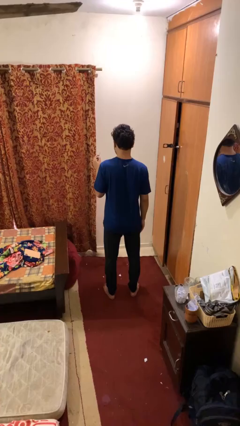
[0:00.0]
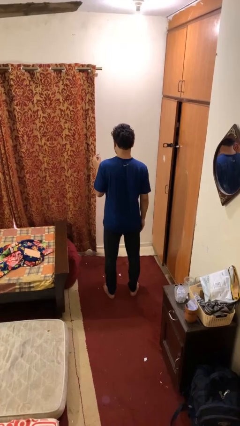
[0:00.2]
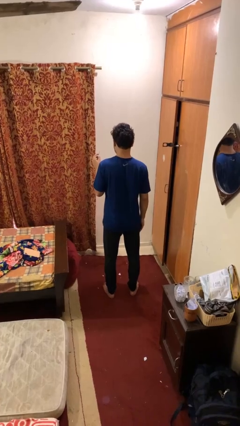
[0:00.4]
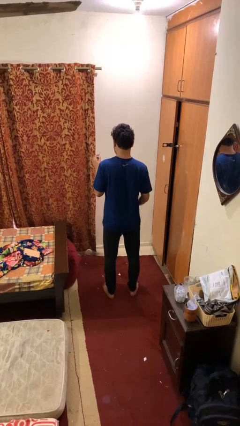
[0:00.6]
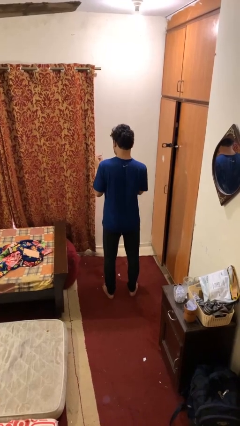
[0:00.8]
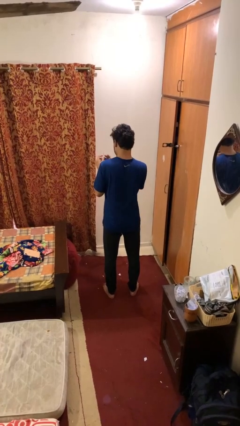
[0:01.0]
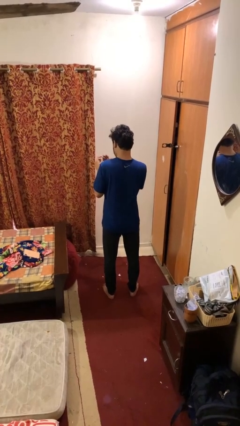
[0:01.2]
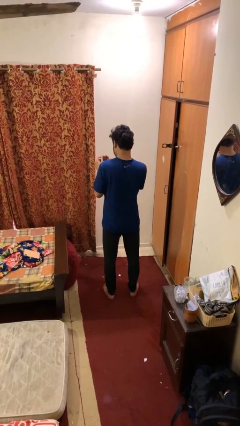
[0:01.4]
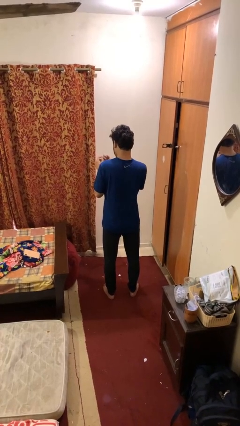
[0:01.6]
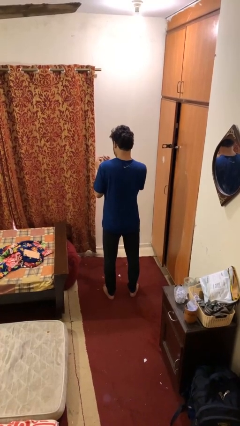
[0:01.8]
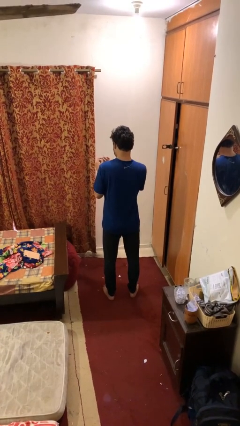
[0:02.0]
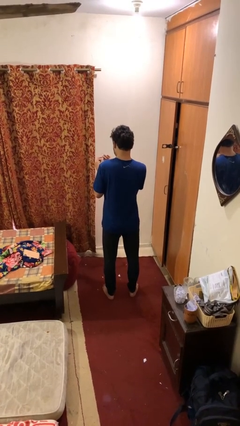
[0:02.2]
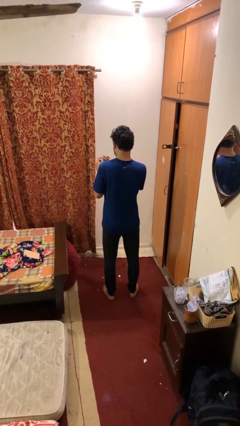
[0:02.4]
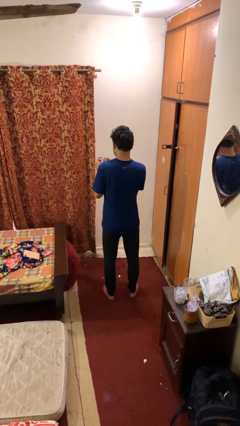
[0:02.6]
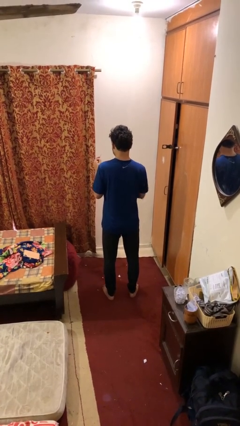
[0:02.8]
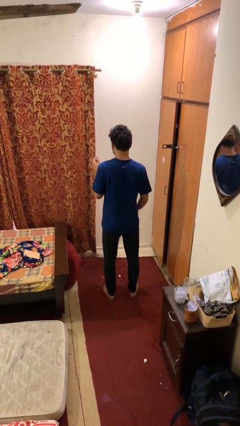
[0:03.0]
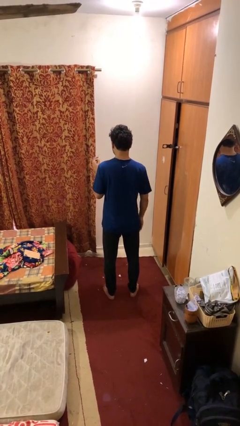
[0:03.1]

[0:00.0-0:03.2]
person files fingernails

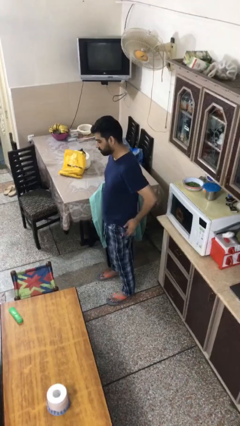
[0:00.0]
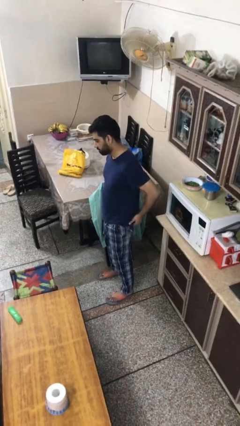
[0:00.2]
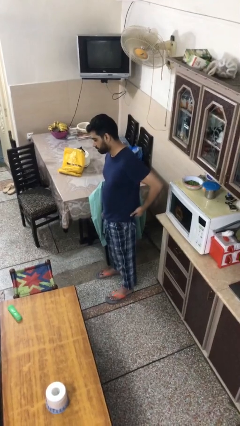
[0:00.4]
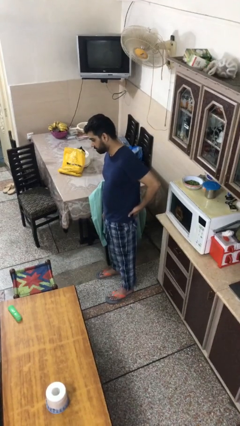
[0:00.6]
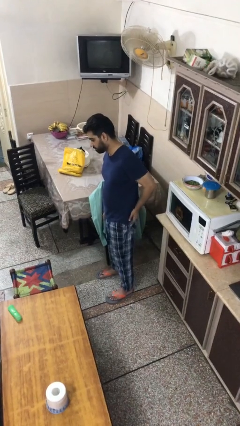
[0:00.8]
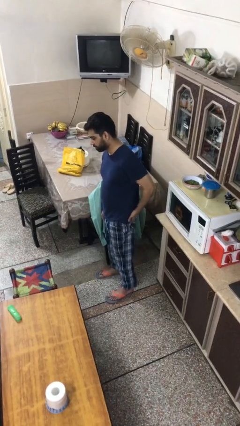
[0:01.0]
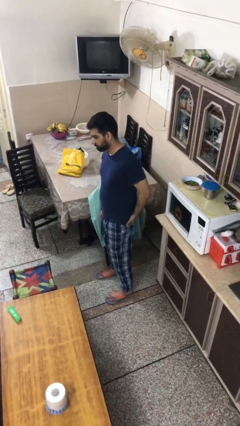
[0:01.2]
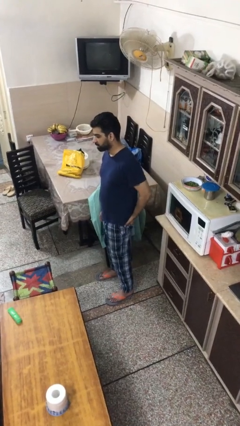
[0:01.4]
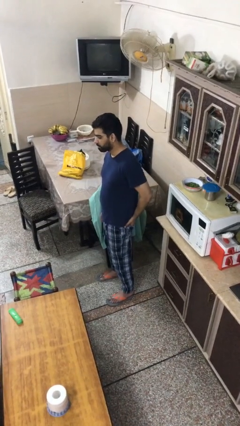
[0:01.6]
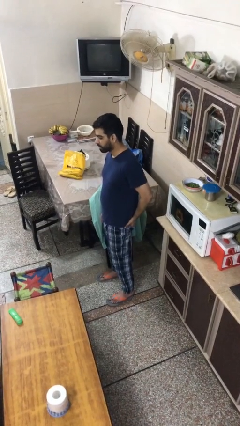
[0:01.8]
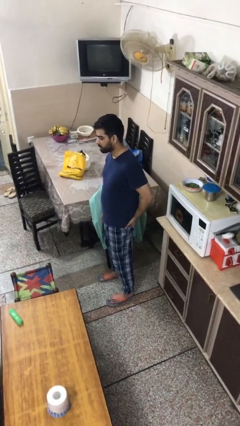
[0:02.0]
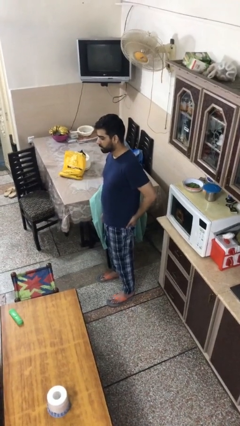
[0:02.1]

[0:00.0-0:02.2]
person puts hands in back pockets

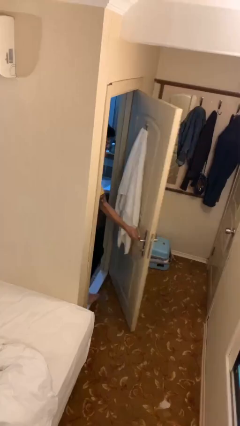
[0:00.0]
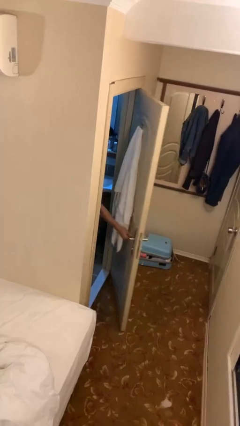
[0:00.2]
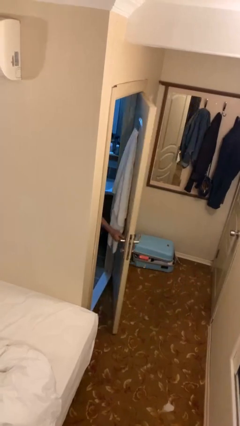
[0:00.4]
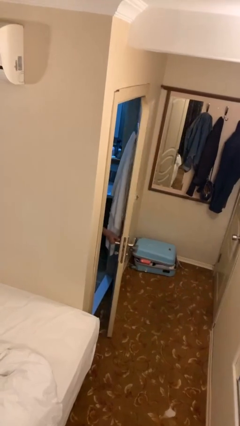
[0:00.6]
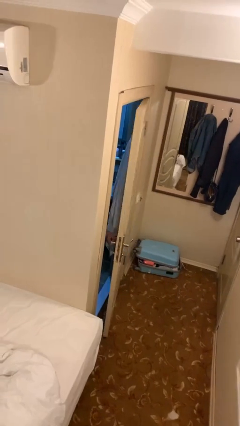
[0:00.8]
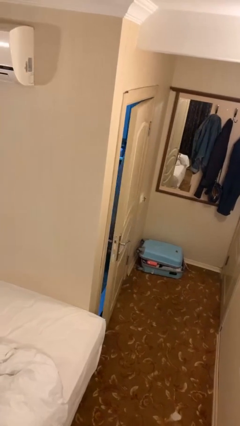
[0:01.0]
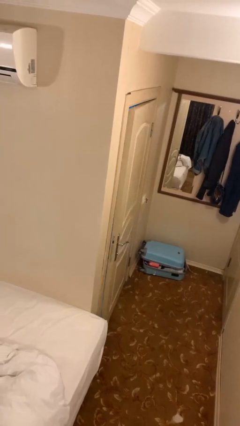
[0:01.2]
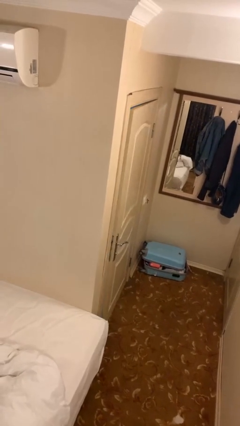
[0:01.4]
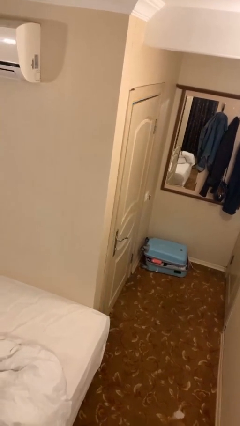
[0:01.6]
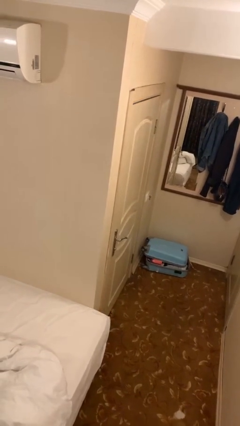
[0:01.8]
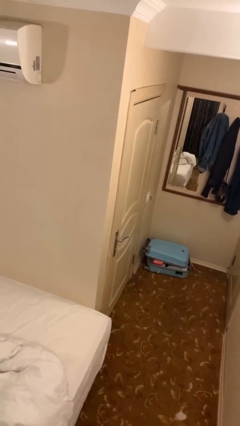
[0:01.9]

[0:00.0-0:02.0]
person closes facility door

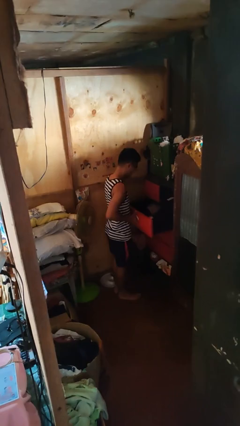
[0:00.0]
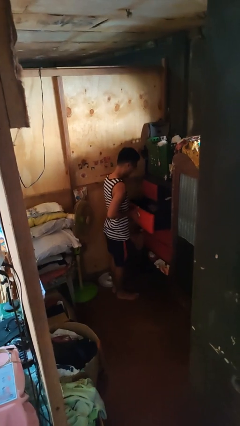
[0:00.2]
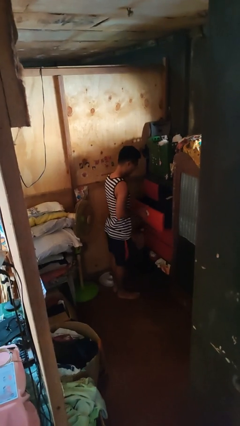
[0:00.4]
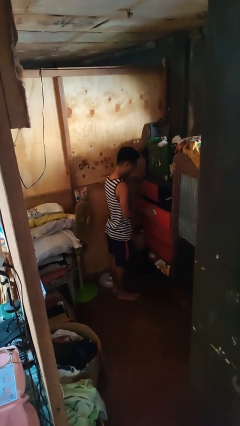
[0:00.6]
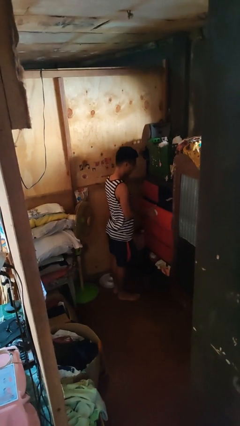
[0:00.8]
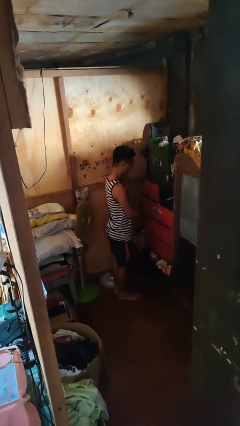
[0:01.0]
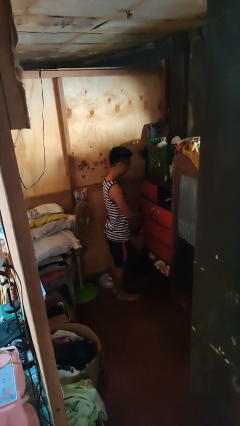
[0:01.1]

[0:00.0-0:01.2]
person closes dresser drawer

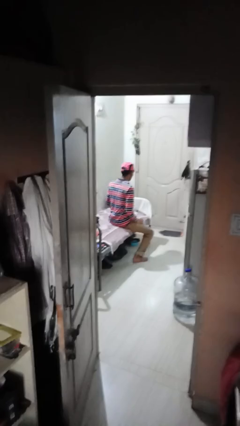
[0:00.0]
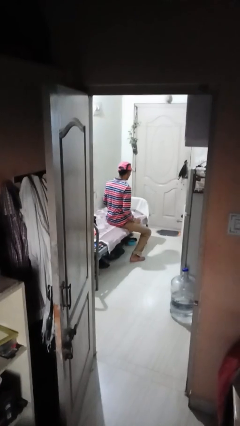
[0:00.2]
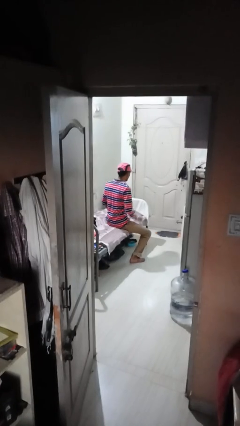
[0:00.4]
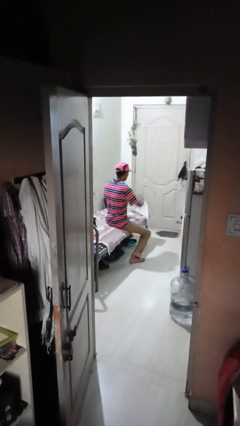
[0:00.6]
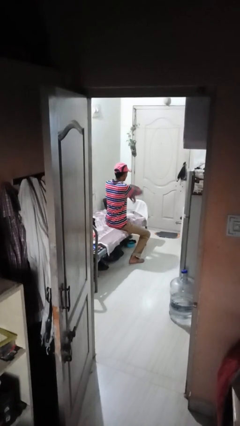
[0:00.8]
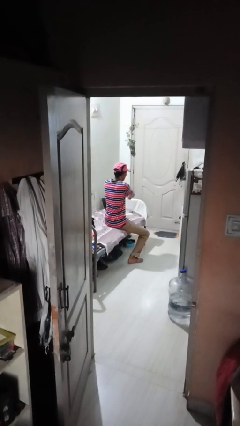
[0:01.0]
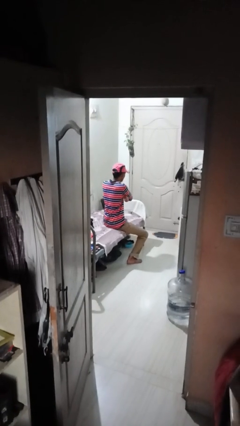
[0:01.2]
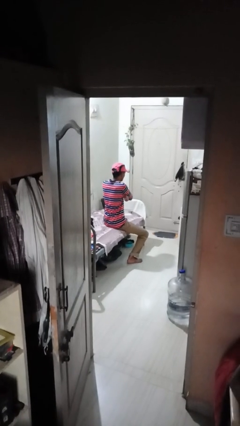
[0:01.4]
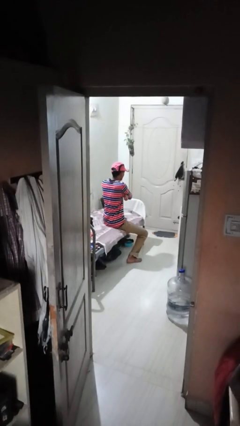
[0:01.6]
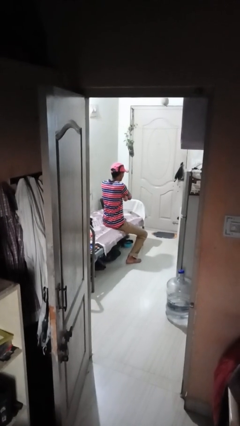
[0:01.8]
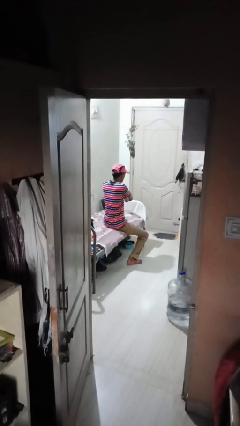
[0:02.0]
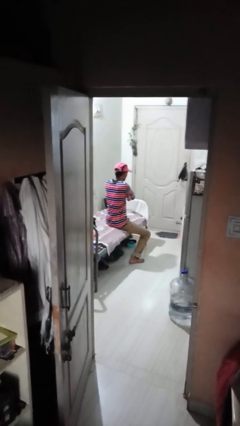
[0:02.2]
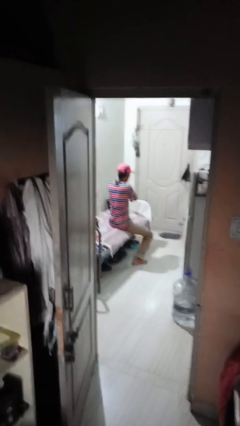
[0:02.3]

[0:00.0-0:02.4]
person crosses arms

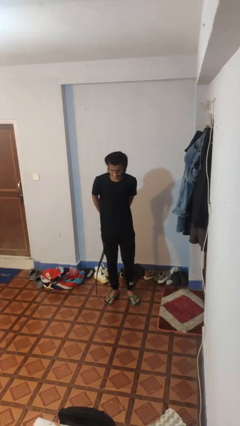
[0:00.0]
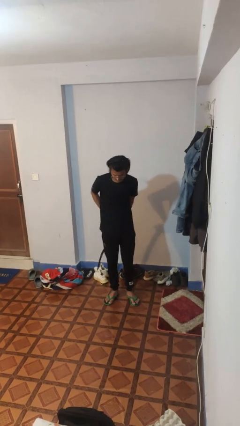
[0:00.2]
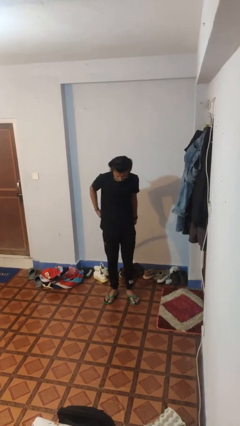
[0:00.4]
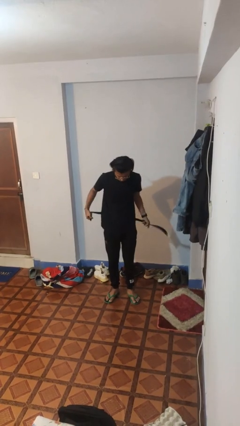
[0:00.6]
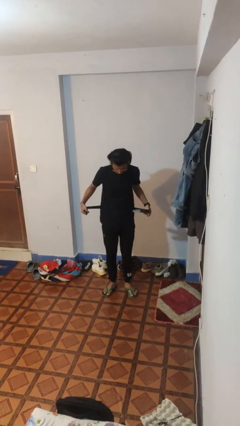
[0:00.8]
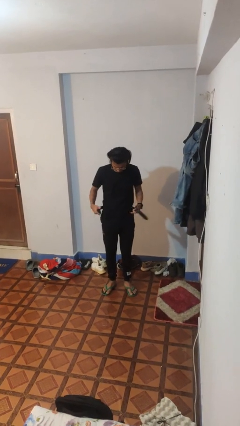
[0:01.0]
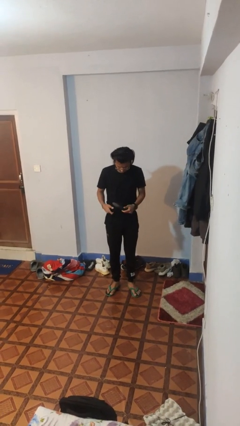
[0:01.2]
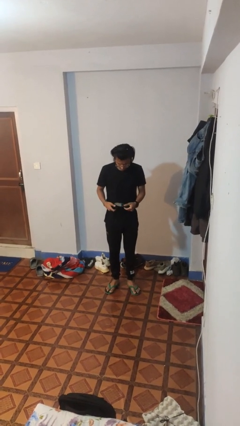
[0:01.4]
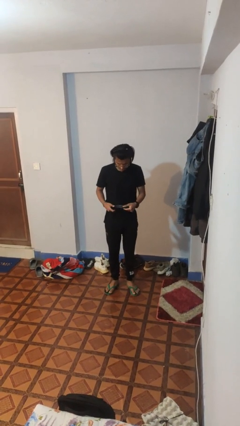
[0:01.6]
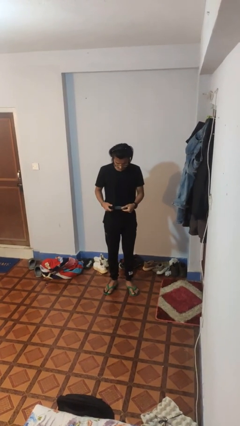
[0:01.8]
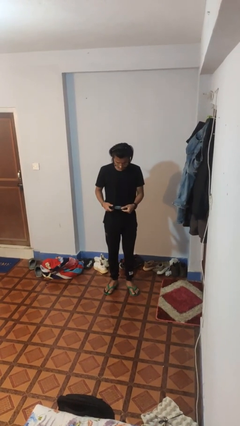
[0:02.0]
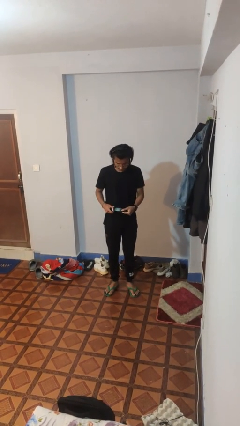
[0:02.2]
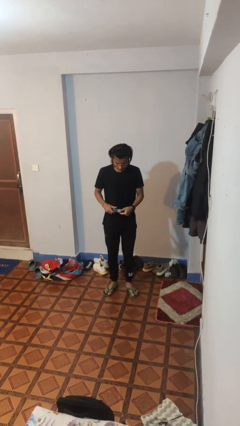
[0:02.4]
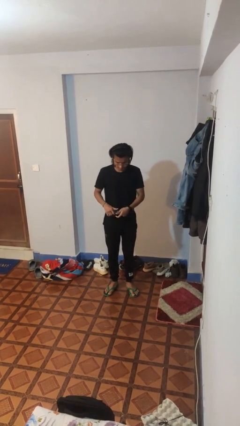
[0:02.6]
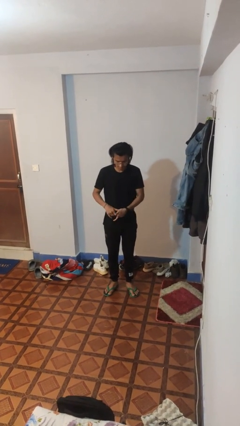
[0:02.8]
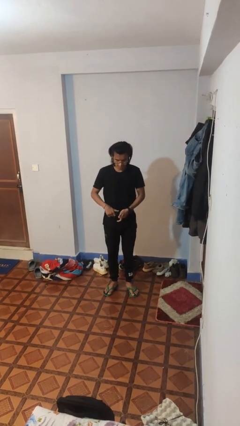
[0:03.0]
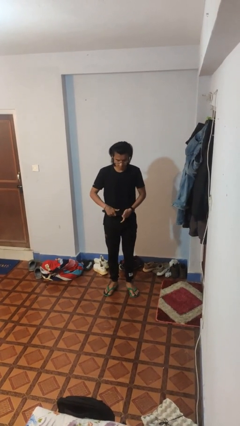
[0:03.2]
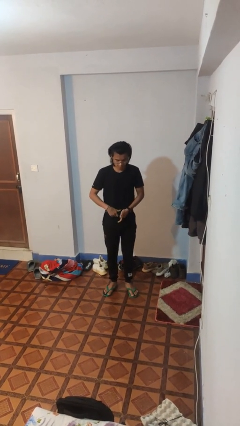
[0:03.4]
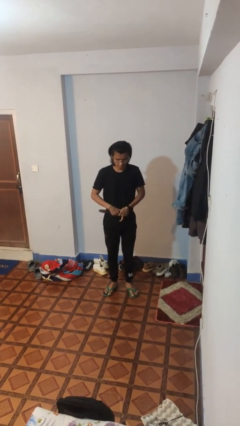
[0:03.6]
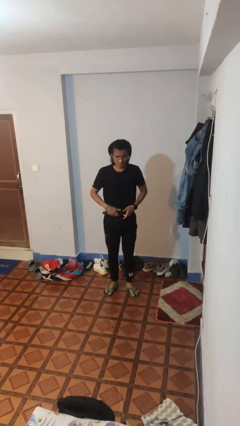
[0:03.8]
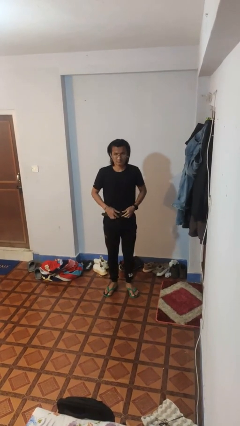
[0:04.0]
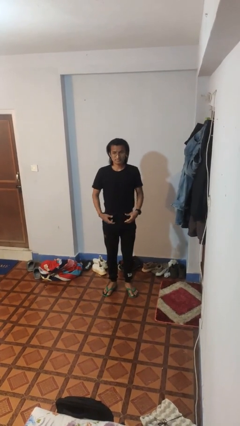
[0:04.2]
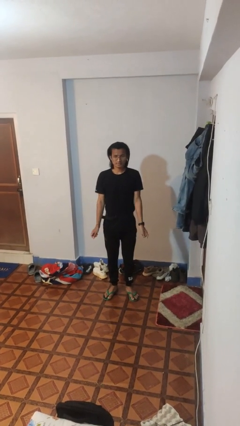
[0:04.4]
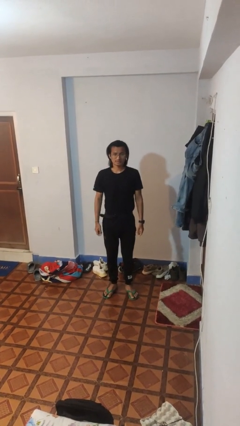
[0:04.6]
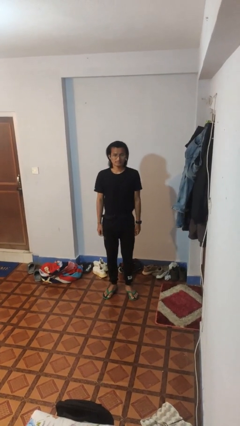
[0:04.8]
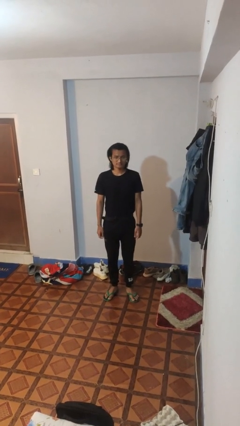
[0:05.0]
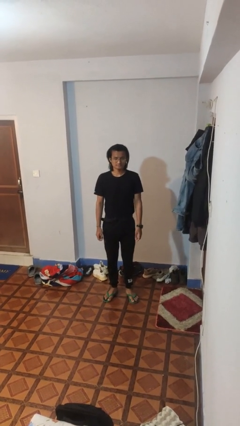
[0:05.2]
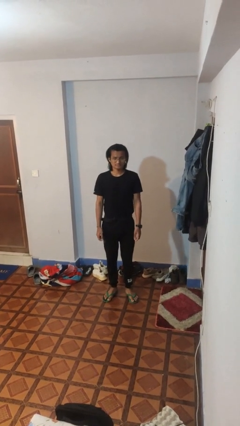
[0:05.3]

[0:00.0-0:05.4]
person puts on belt

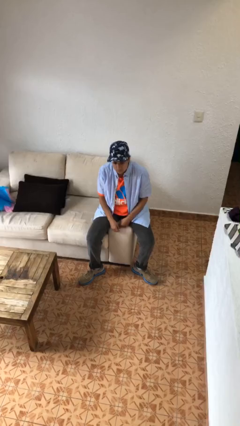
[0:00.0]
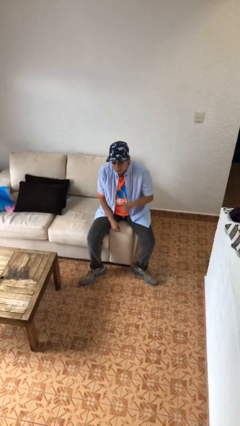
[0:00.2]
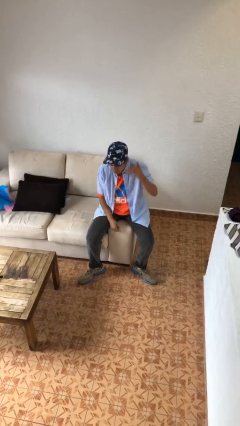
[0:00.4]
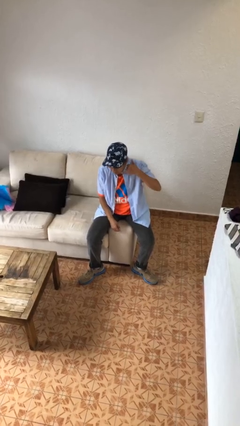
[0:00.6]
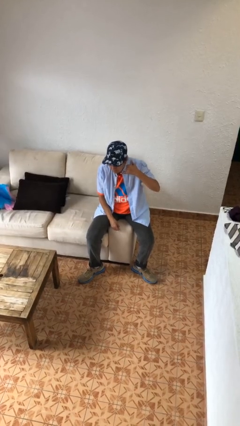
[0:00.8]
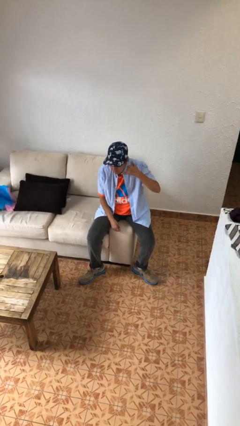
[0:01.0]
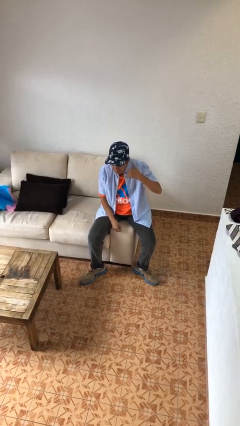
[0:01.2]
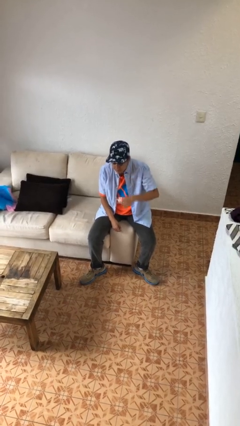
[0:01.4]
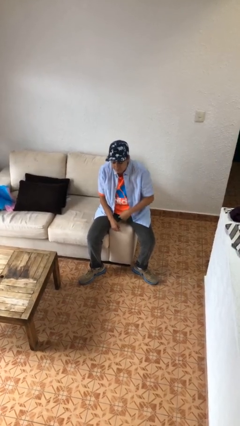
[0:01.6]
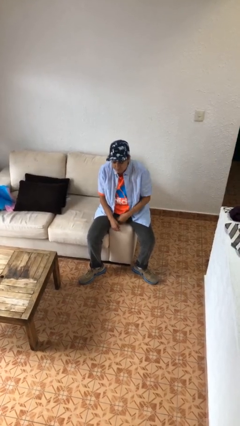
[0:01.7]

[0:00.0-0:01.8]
person gestures call me
